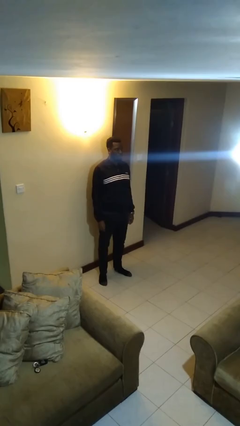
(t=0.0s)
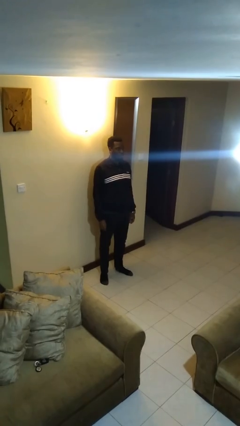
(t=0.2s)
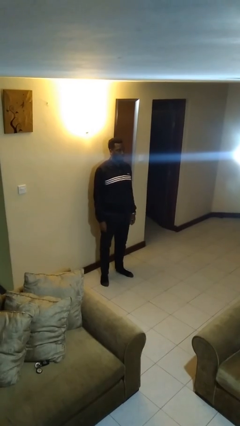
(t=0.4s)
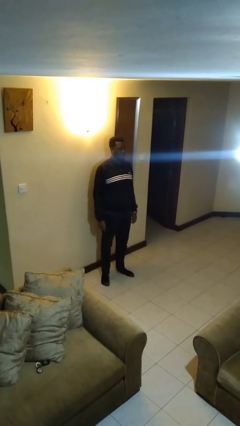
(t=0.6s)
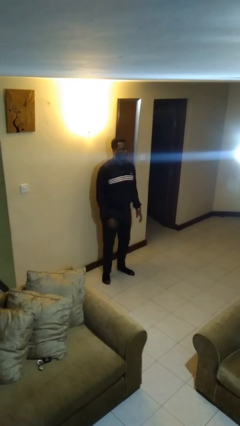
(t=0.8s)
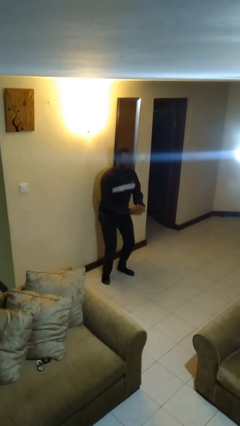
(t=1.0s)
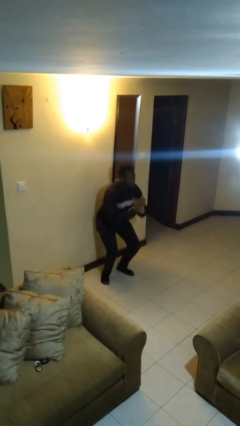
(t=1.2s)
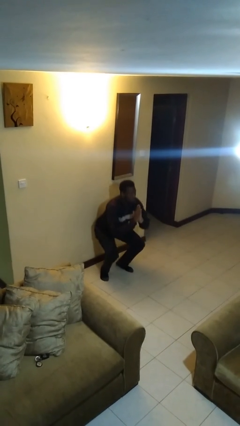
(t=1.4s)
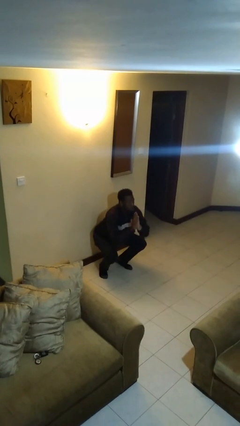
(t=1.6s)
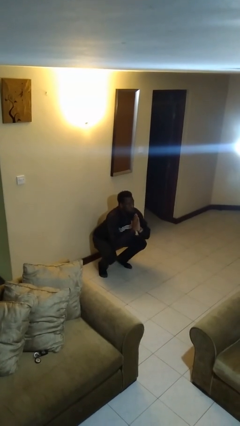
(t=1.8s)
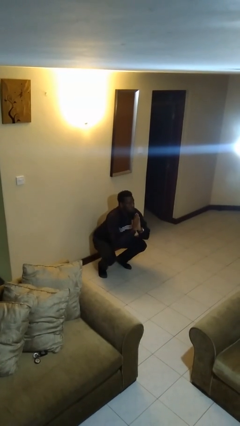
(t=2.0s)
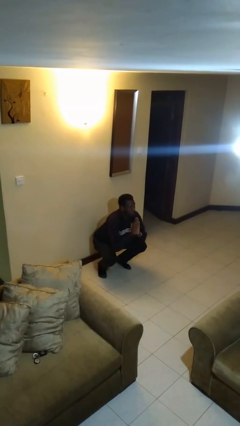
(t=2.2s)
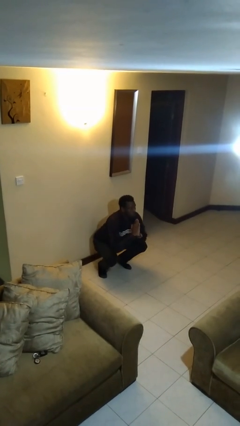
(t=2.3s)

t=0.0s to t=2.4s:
person squats

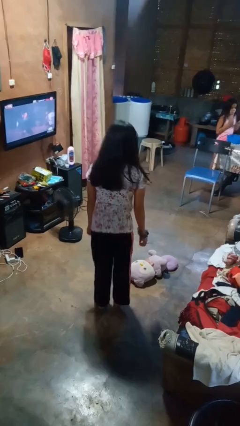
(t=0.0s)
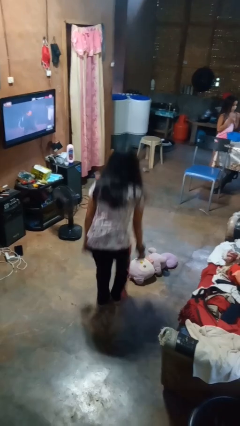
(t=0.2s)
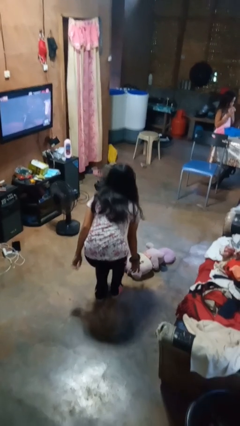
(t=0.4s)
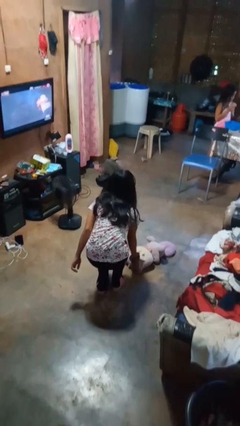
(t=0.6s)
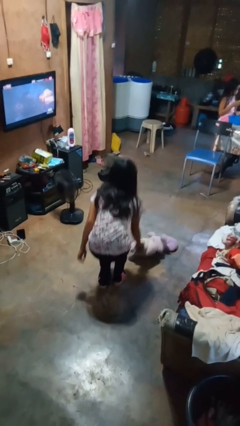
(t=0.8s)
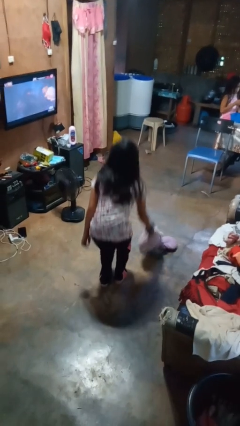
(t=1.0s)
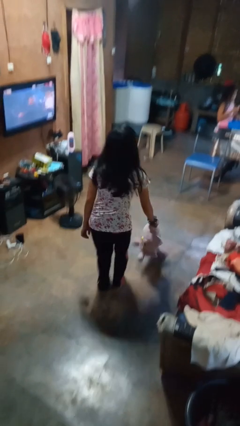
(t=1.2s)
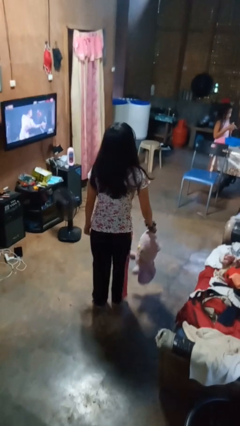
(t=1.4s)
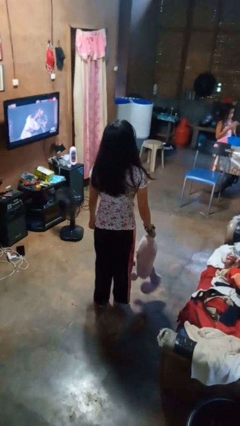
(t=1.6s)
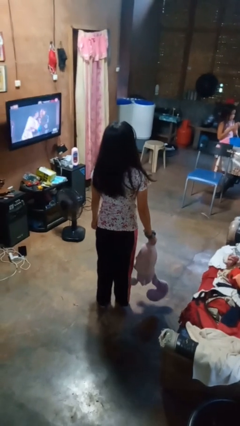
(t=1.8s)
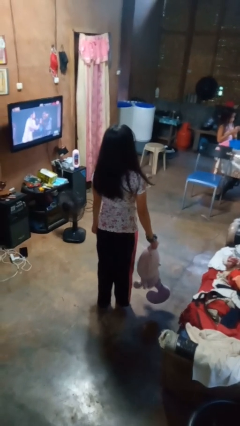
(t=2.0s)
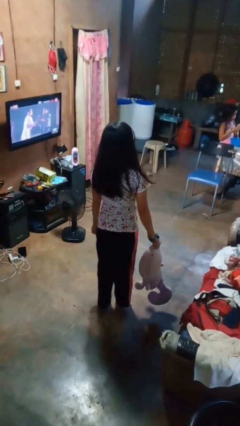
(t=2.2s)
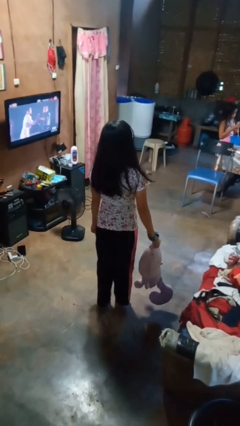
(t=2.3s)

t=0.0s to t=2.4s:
person picks up object from floor

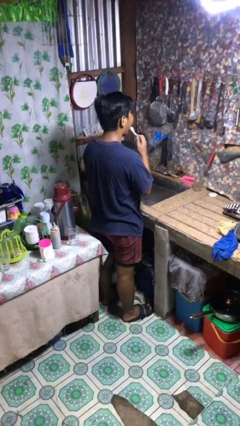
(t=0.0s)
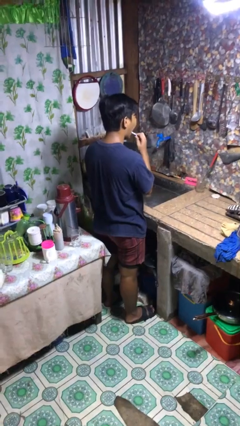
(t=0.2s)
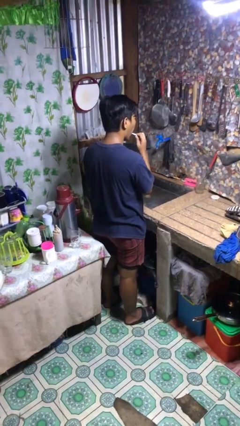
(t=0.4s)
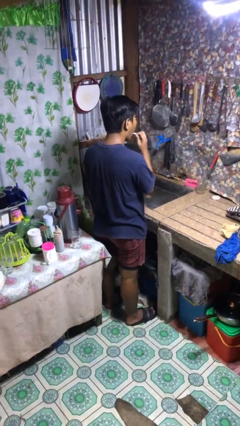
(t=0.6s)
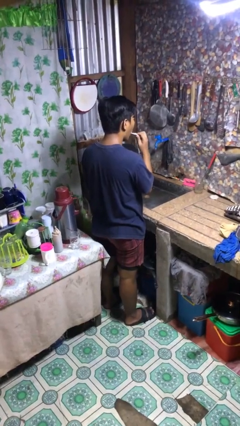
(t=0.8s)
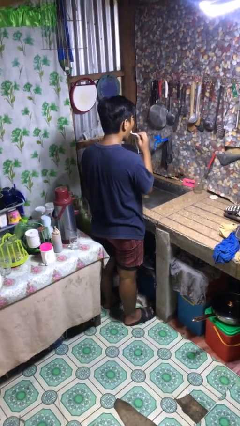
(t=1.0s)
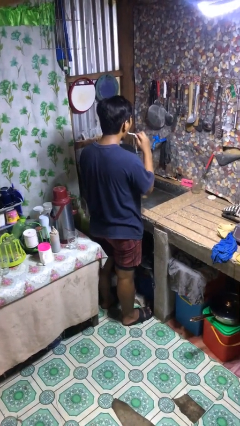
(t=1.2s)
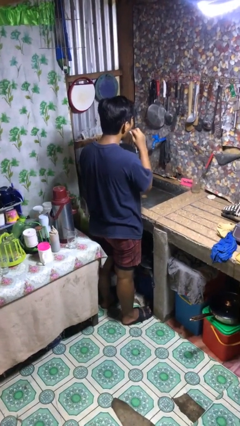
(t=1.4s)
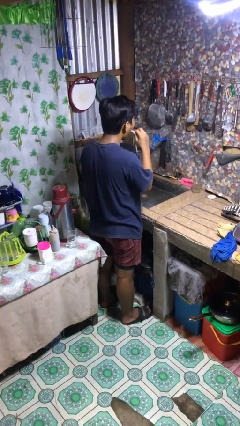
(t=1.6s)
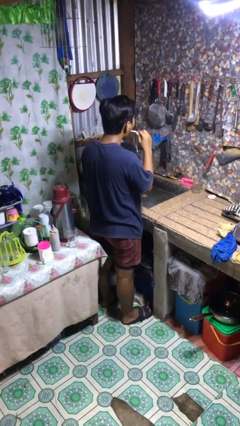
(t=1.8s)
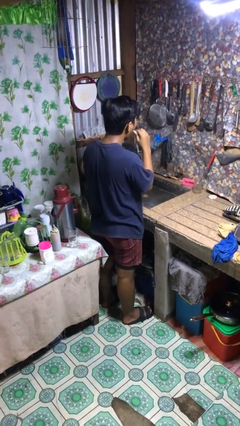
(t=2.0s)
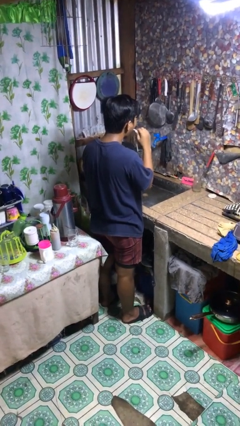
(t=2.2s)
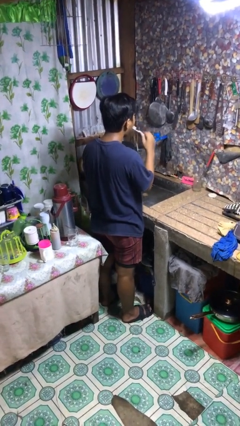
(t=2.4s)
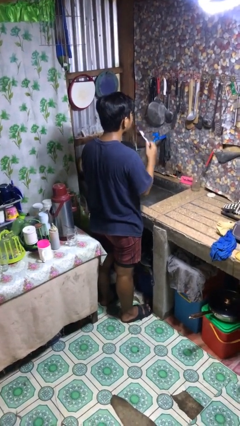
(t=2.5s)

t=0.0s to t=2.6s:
person brushes teeth

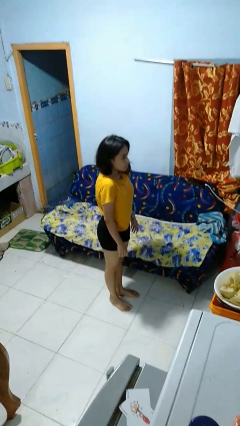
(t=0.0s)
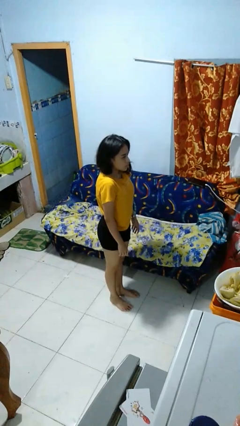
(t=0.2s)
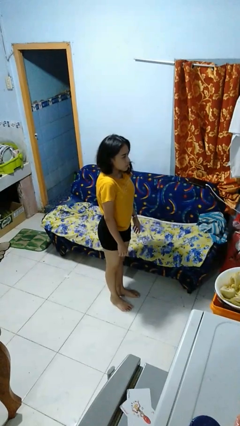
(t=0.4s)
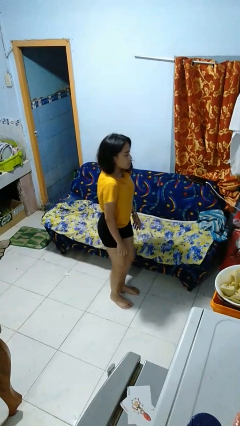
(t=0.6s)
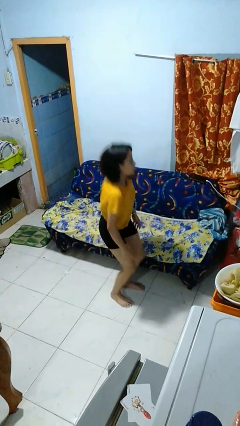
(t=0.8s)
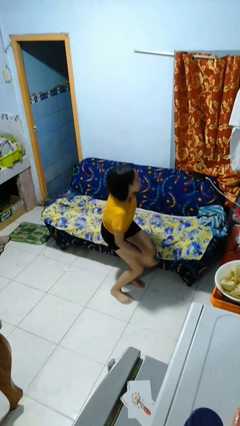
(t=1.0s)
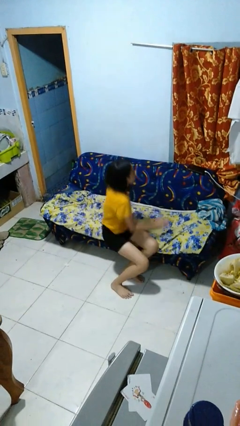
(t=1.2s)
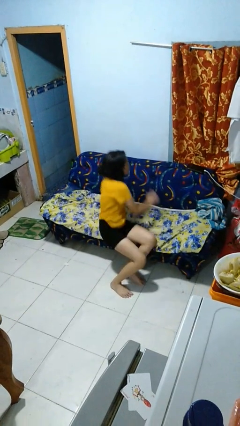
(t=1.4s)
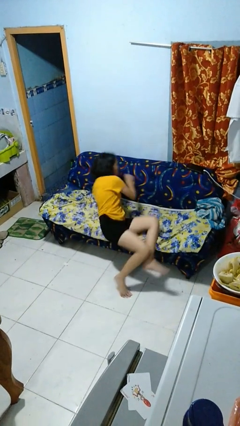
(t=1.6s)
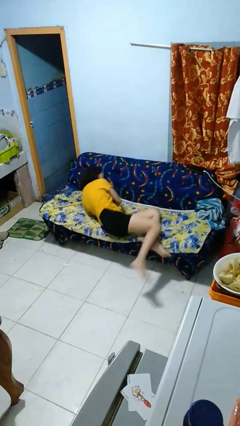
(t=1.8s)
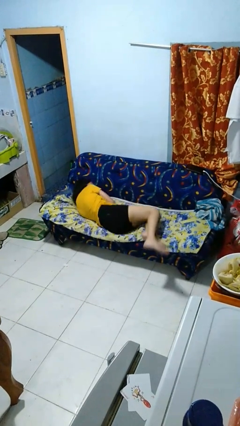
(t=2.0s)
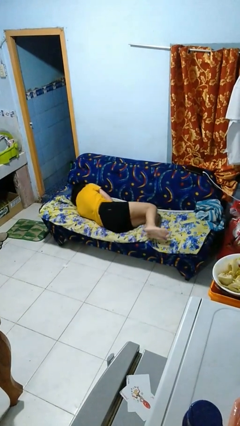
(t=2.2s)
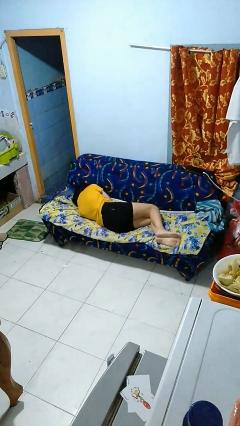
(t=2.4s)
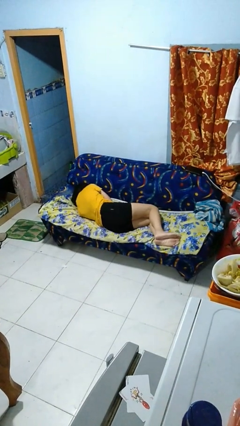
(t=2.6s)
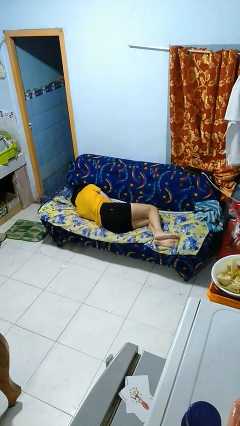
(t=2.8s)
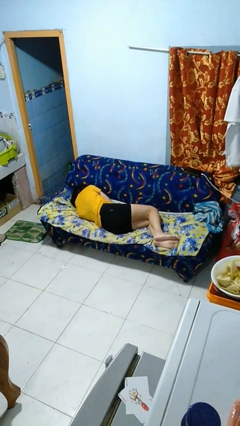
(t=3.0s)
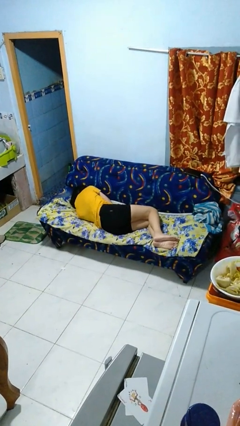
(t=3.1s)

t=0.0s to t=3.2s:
person lies down on couch

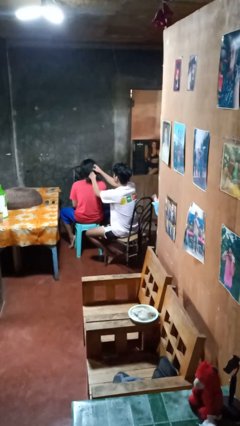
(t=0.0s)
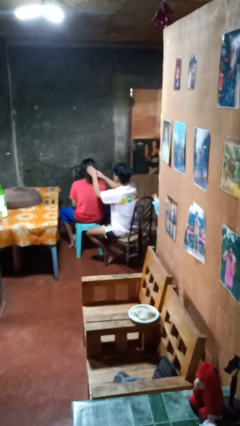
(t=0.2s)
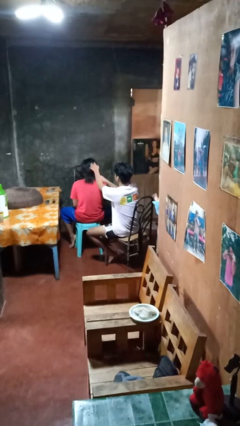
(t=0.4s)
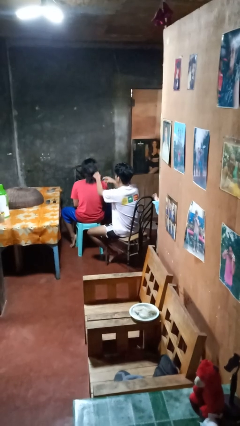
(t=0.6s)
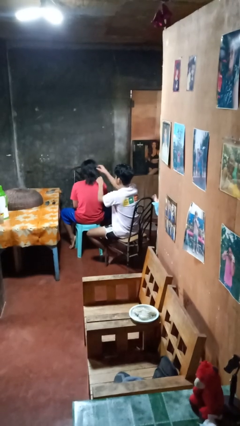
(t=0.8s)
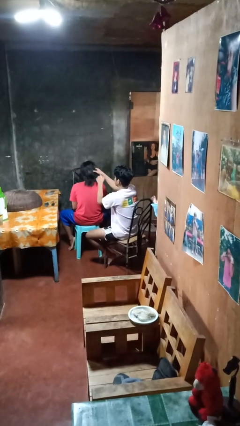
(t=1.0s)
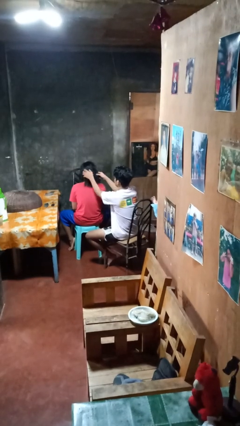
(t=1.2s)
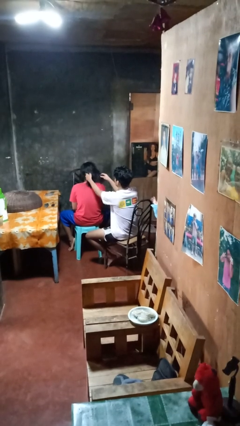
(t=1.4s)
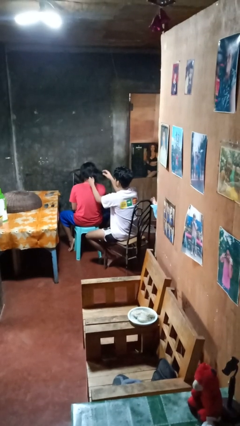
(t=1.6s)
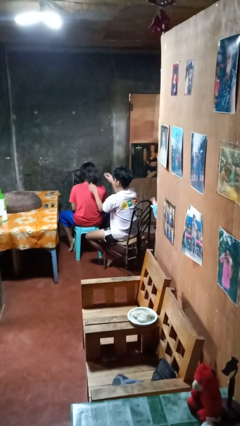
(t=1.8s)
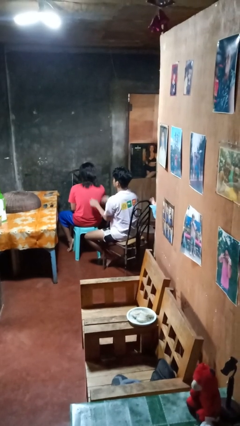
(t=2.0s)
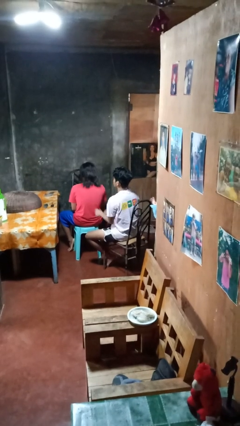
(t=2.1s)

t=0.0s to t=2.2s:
person braids hair of person

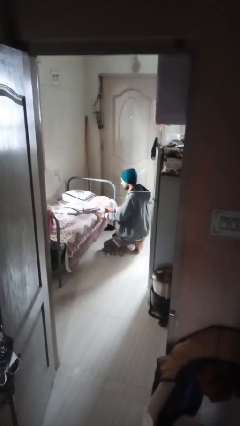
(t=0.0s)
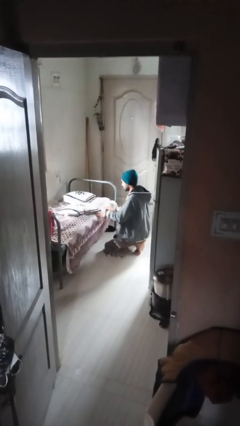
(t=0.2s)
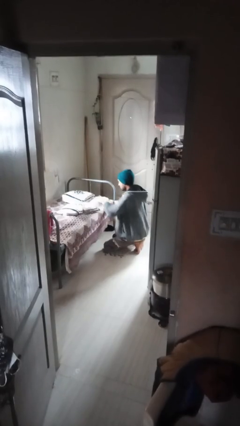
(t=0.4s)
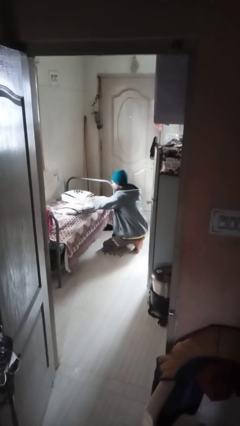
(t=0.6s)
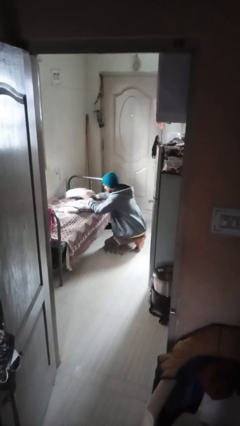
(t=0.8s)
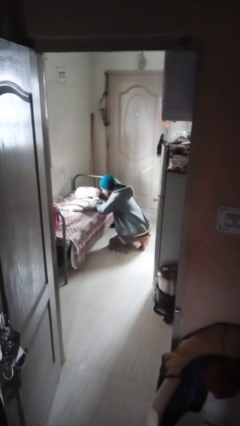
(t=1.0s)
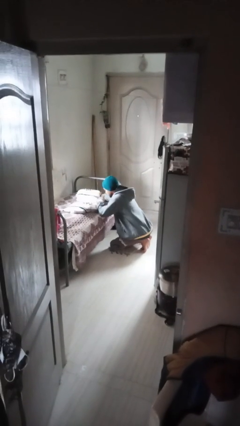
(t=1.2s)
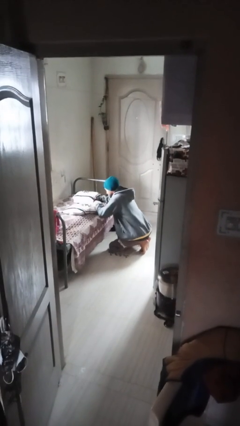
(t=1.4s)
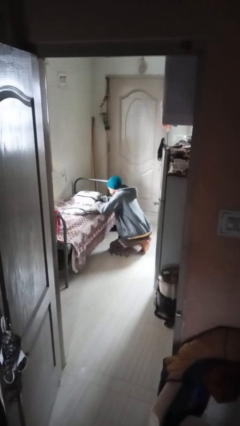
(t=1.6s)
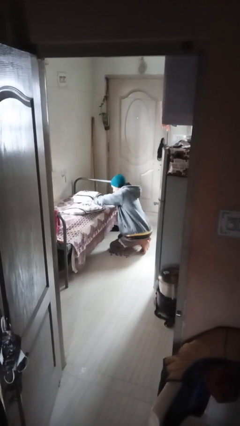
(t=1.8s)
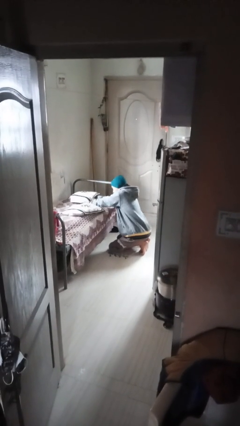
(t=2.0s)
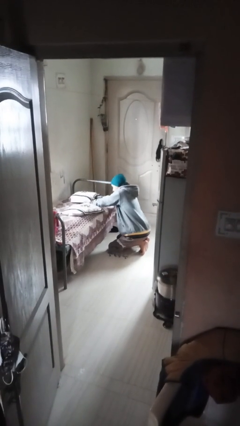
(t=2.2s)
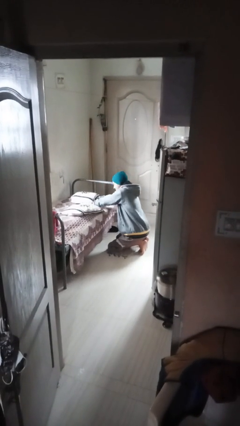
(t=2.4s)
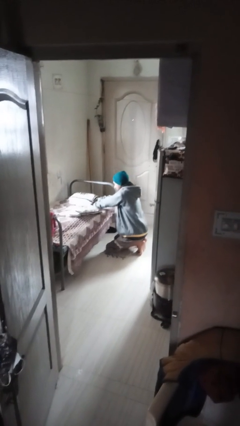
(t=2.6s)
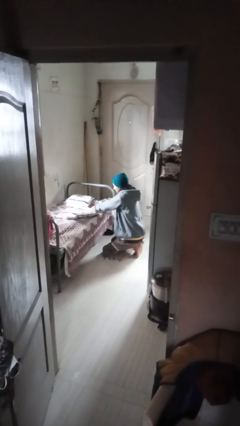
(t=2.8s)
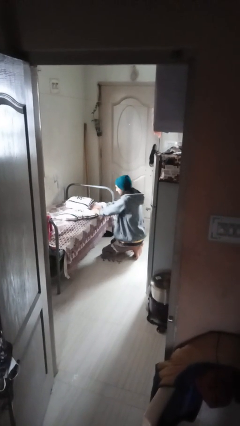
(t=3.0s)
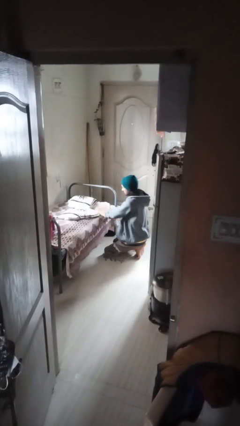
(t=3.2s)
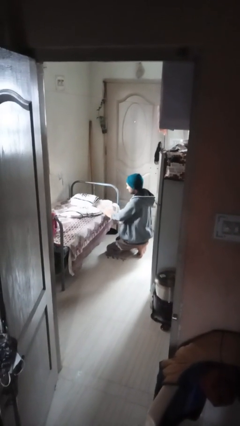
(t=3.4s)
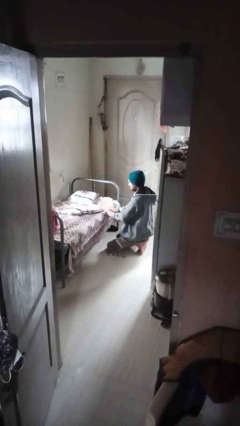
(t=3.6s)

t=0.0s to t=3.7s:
person searches in couch

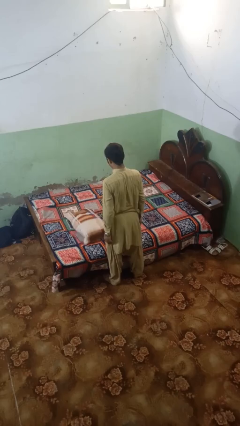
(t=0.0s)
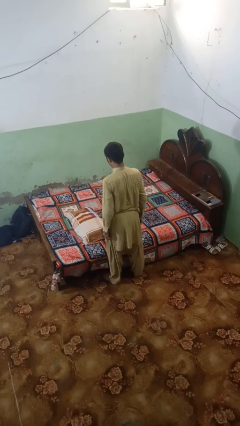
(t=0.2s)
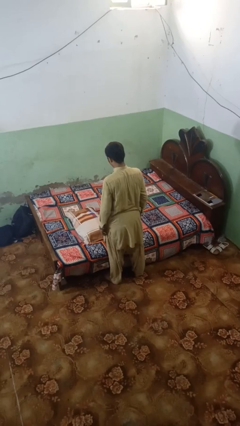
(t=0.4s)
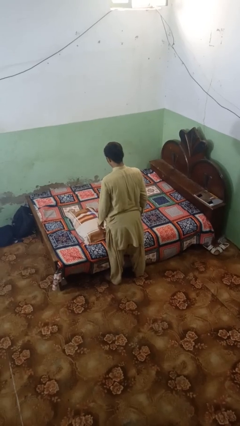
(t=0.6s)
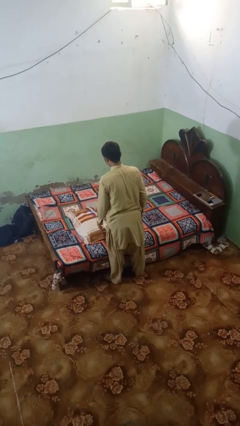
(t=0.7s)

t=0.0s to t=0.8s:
person throws object on bed

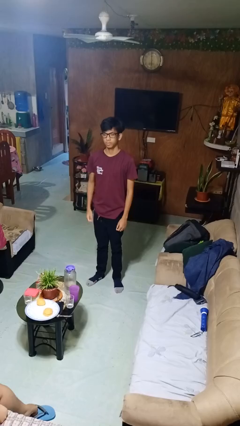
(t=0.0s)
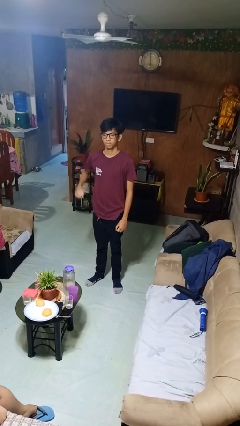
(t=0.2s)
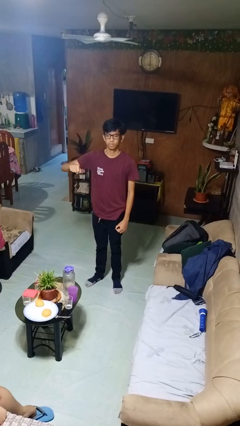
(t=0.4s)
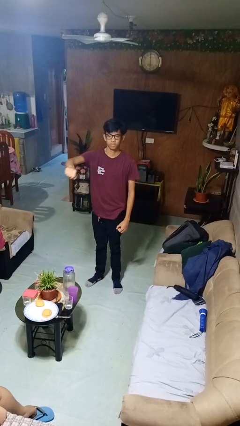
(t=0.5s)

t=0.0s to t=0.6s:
person punches
